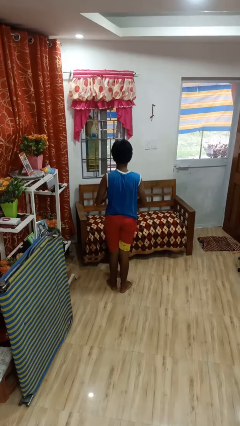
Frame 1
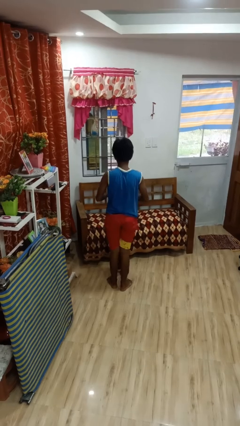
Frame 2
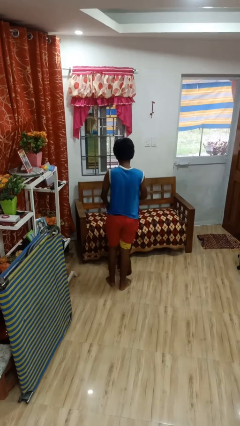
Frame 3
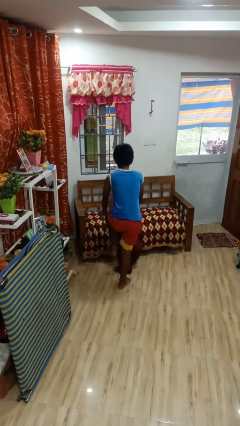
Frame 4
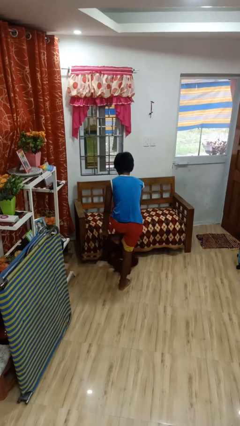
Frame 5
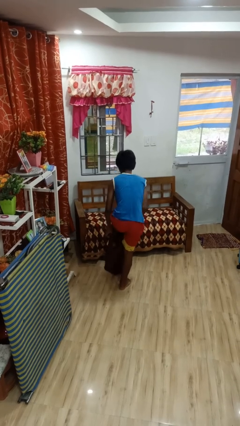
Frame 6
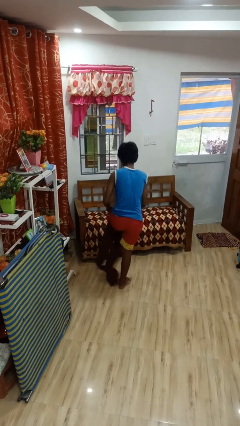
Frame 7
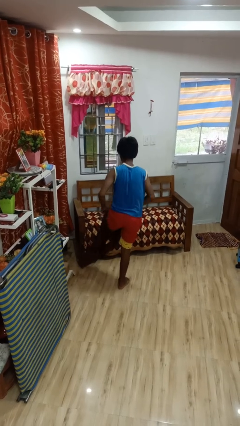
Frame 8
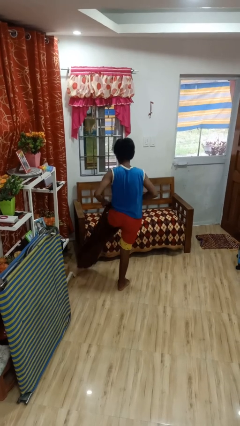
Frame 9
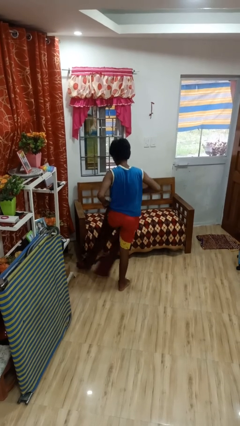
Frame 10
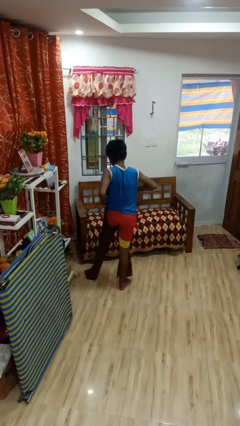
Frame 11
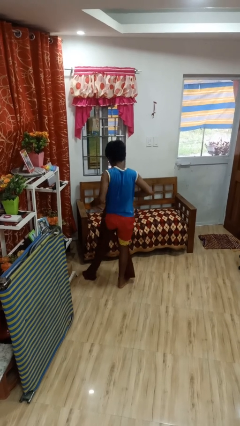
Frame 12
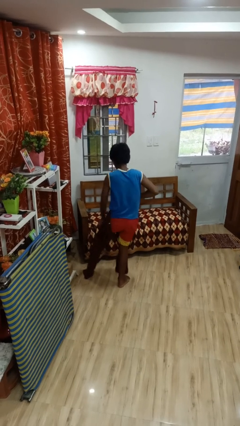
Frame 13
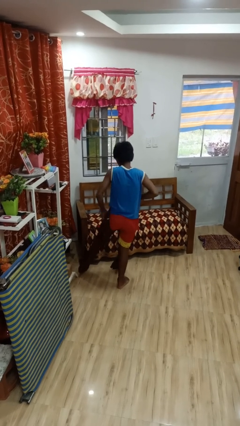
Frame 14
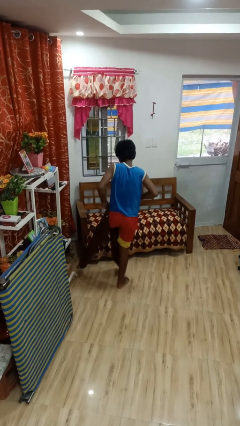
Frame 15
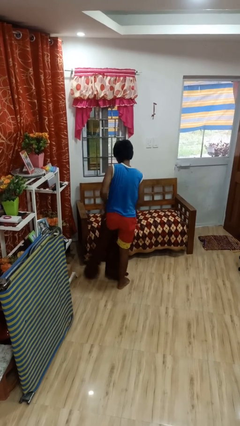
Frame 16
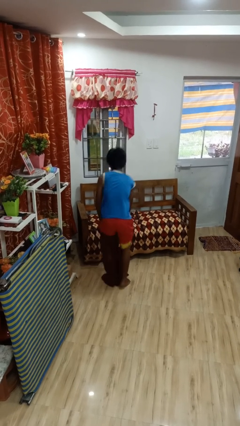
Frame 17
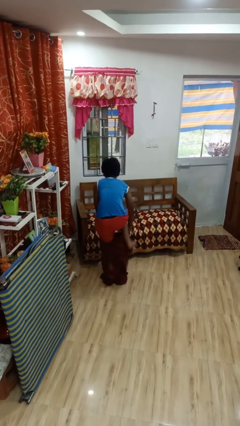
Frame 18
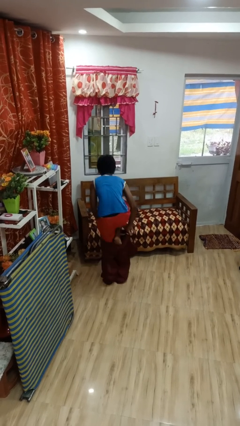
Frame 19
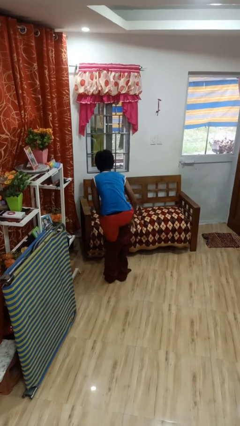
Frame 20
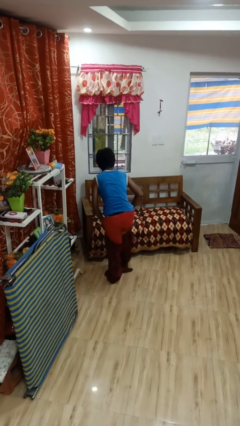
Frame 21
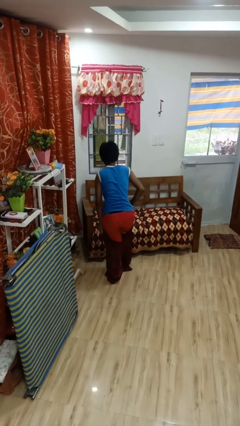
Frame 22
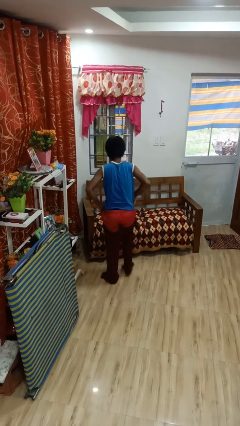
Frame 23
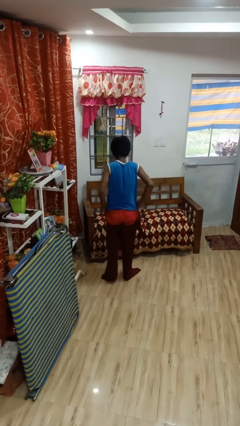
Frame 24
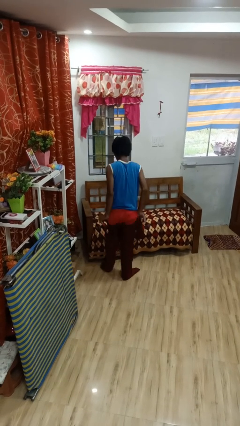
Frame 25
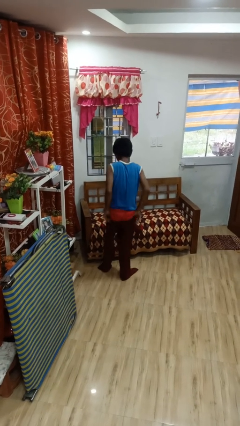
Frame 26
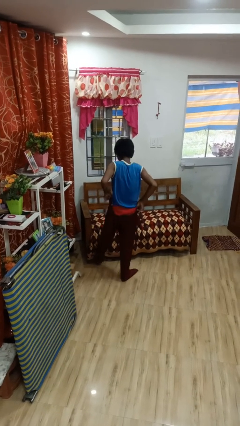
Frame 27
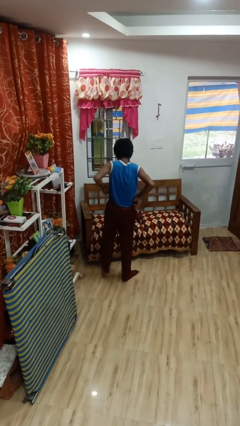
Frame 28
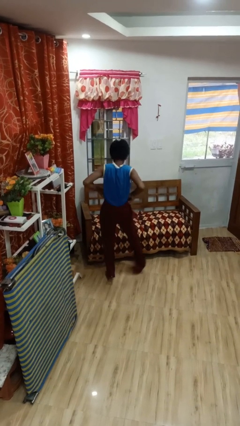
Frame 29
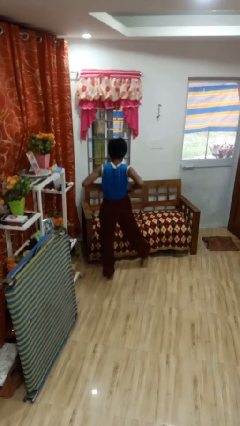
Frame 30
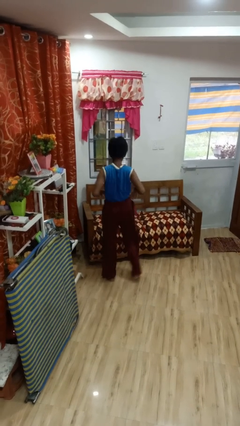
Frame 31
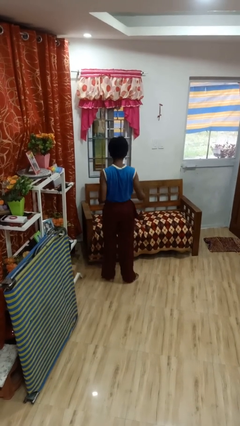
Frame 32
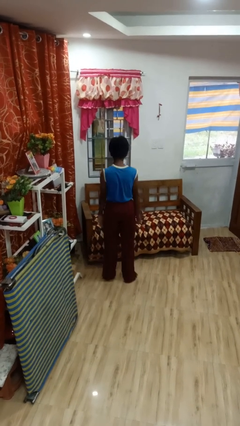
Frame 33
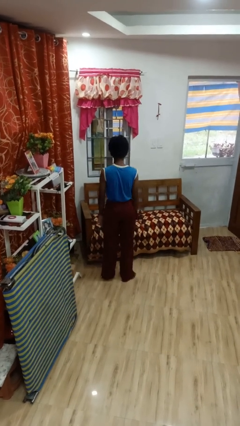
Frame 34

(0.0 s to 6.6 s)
person puts on pants

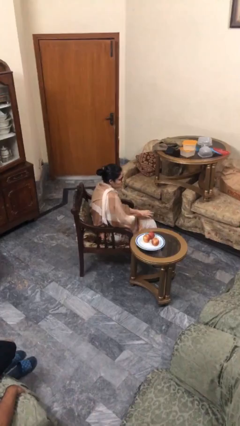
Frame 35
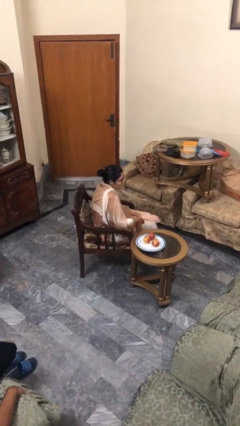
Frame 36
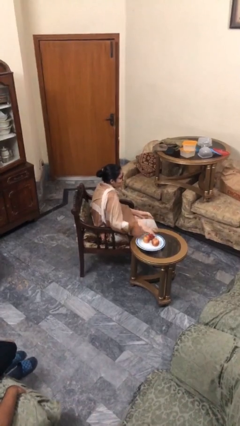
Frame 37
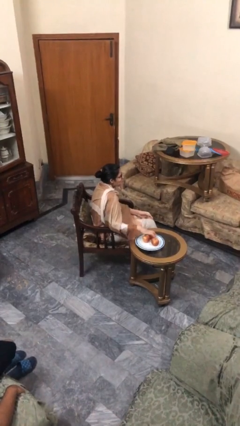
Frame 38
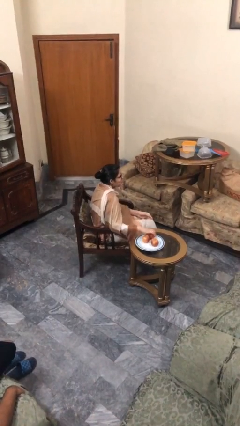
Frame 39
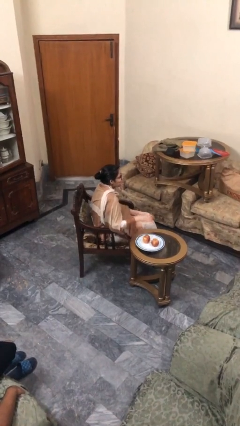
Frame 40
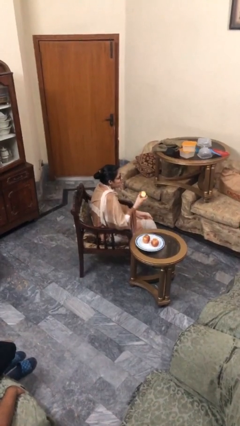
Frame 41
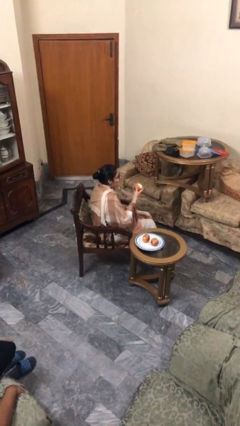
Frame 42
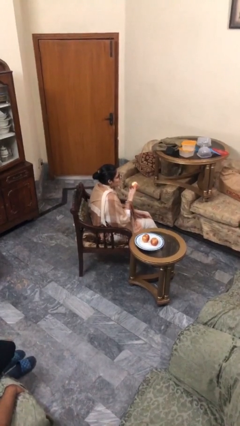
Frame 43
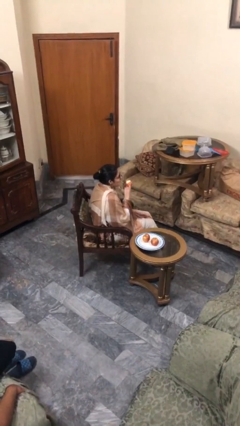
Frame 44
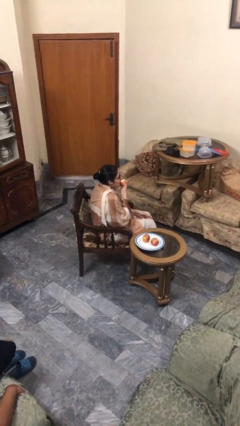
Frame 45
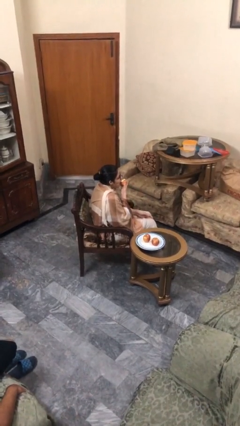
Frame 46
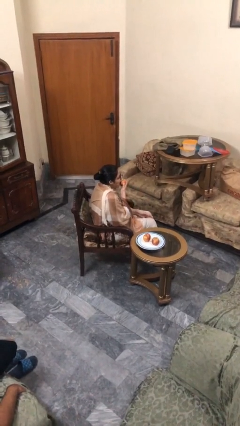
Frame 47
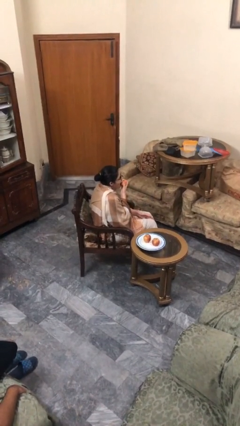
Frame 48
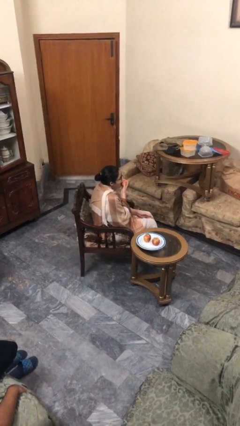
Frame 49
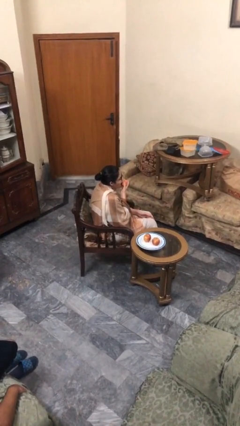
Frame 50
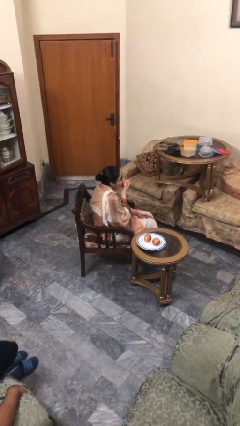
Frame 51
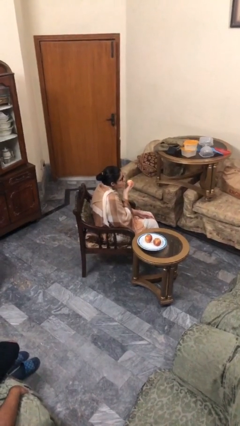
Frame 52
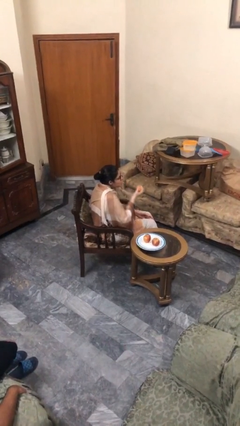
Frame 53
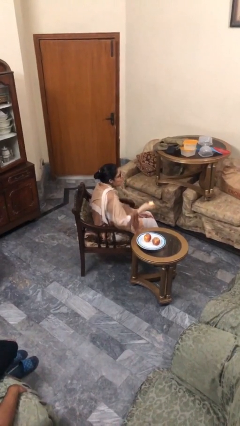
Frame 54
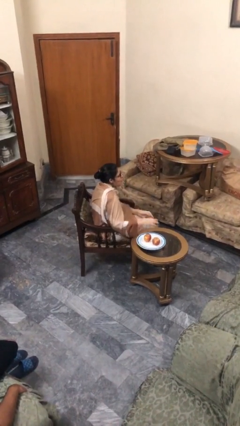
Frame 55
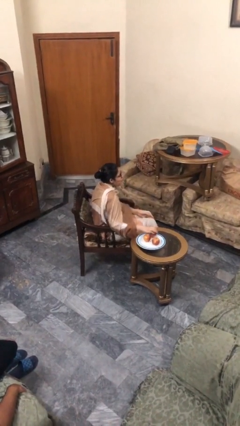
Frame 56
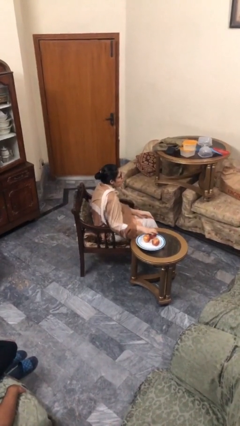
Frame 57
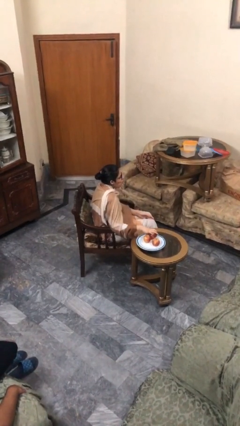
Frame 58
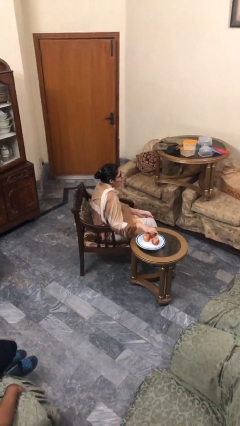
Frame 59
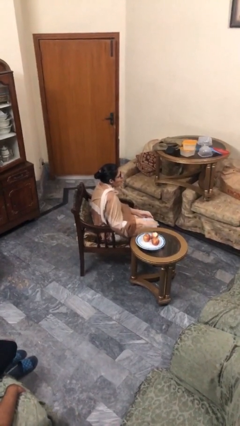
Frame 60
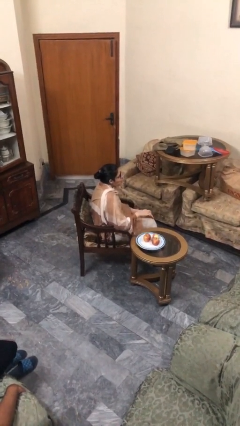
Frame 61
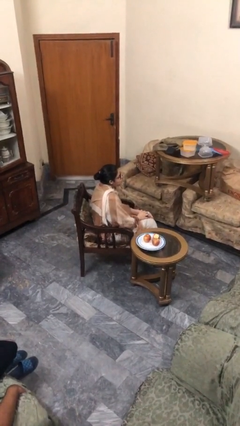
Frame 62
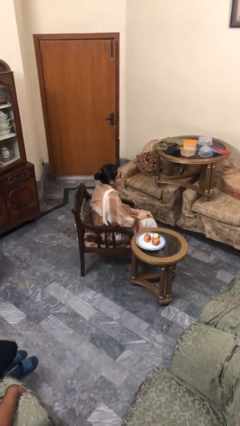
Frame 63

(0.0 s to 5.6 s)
person eats apple

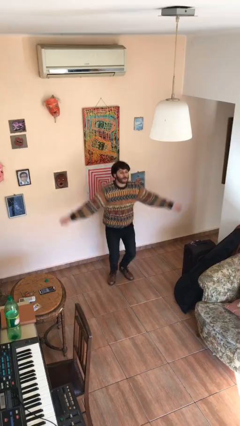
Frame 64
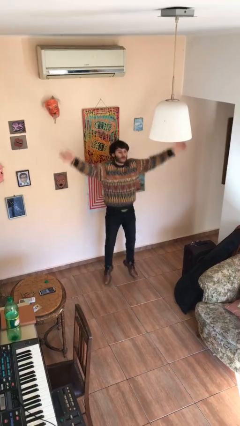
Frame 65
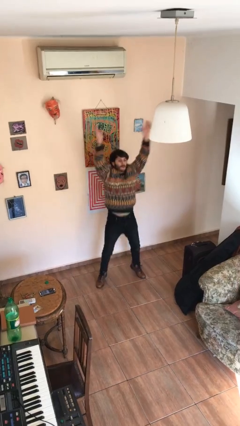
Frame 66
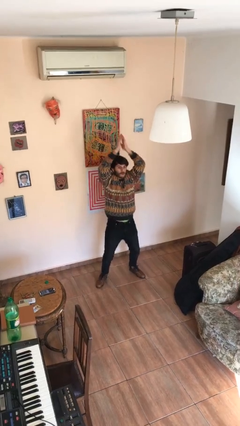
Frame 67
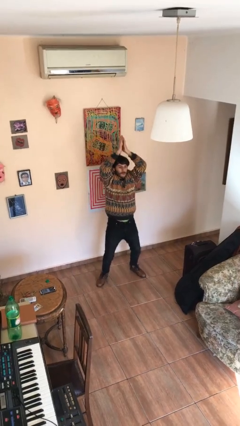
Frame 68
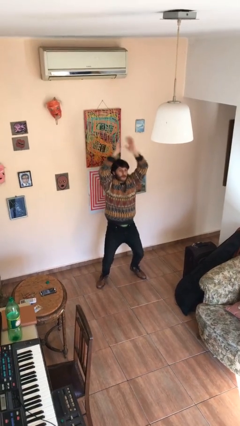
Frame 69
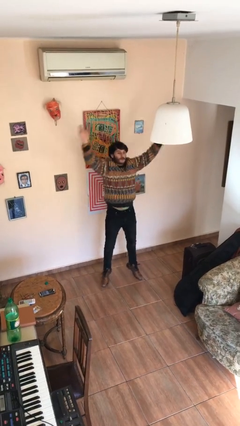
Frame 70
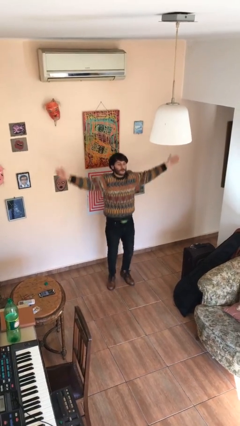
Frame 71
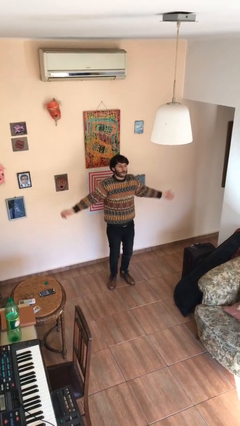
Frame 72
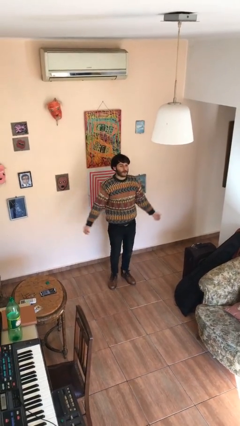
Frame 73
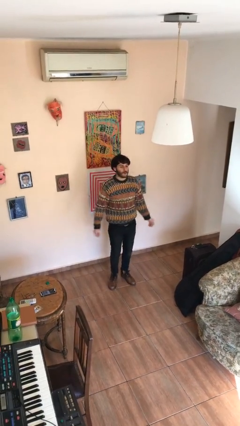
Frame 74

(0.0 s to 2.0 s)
person exercises with jumping jacks

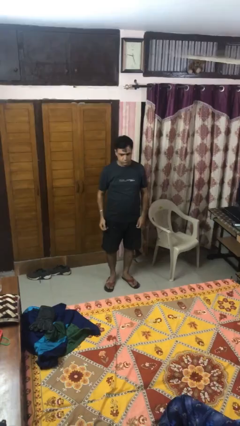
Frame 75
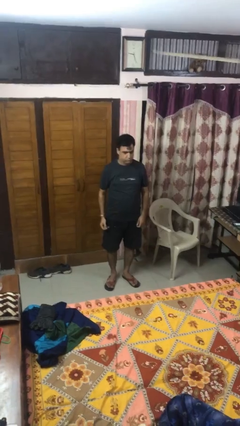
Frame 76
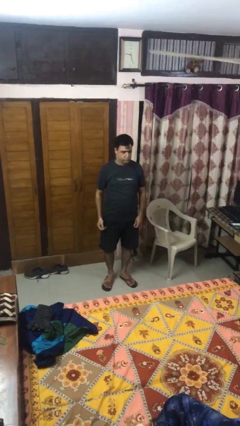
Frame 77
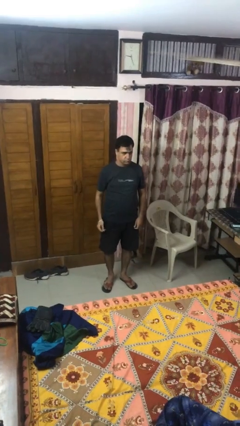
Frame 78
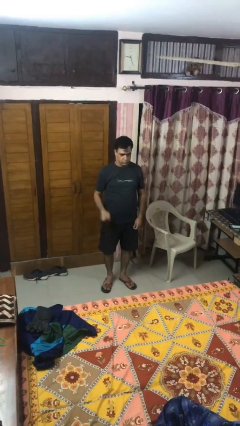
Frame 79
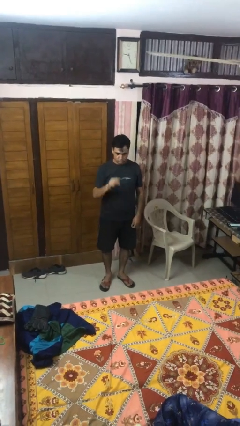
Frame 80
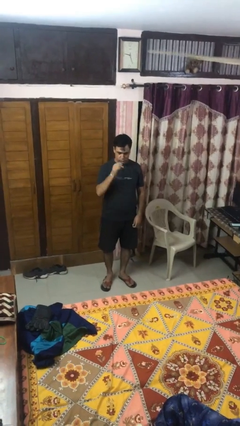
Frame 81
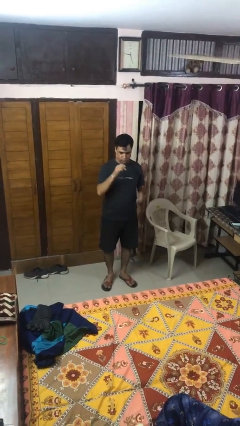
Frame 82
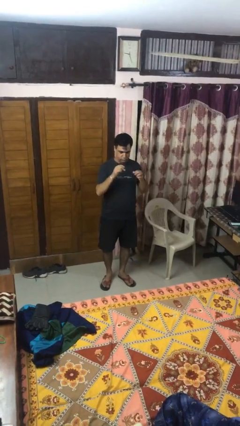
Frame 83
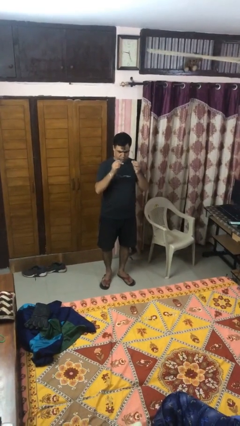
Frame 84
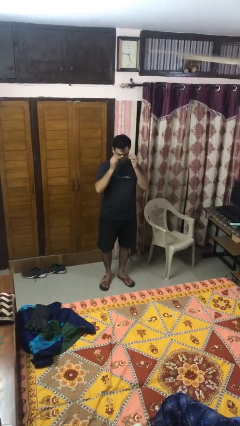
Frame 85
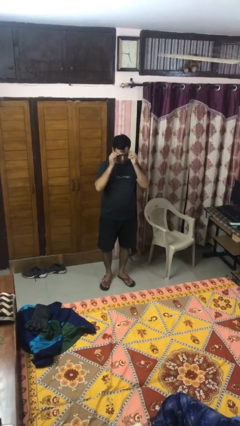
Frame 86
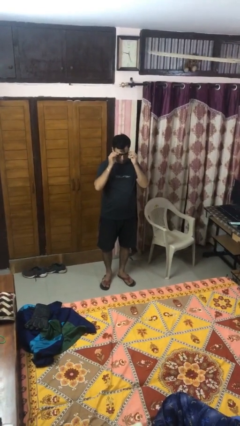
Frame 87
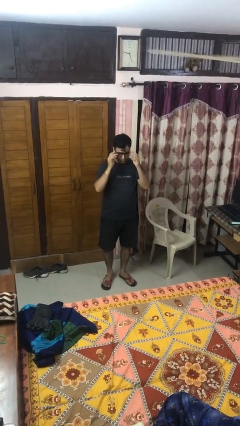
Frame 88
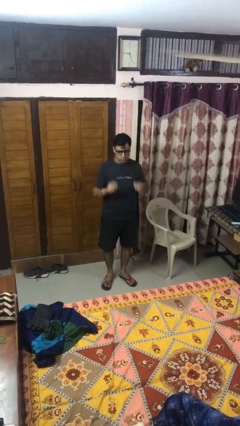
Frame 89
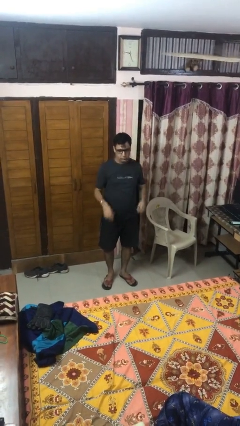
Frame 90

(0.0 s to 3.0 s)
person puts on glasses

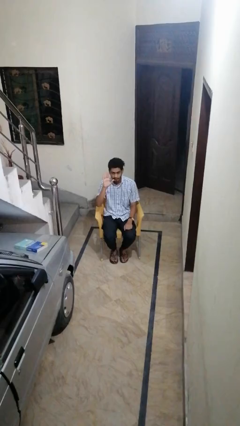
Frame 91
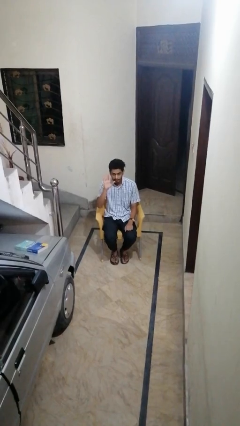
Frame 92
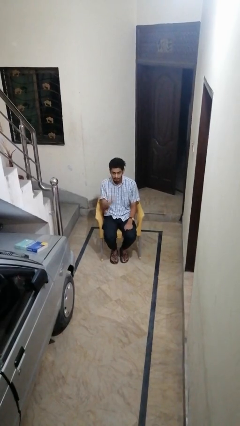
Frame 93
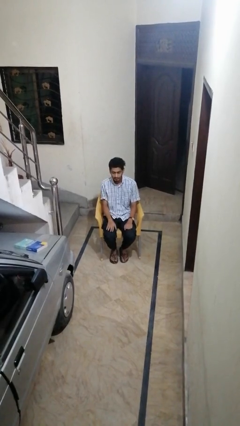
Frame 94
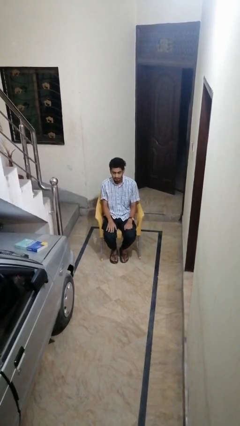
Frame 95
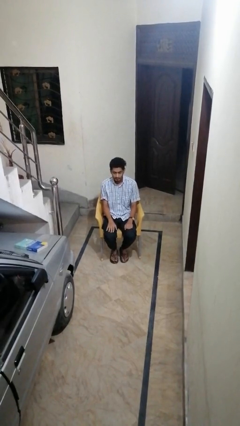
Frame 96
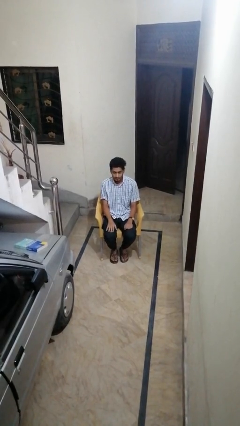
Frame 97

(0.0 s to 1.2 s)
person gestures lower hand
